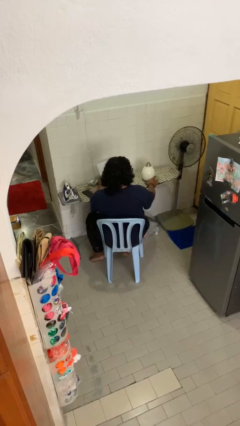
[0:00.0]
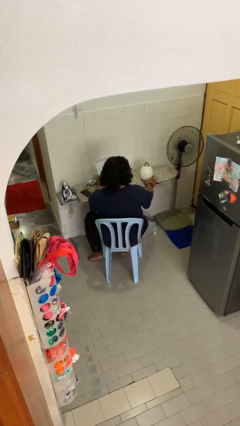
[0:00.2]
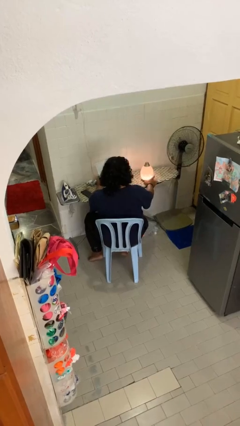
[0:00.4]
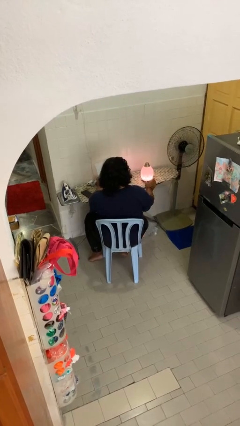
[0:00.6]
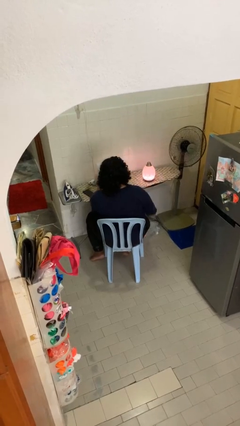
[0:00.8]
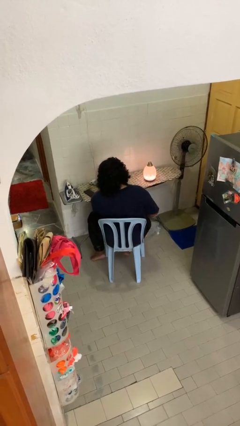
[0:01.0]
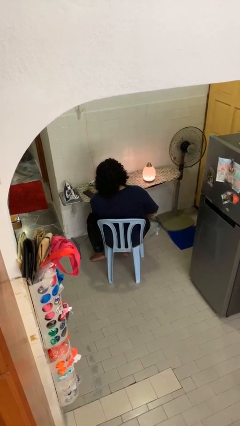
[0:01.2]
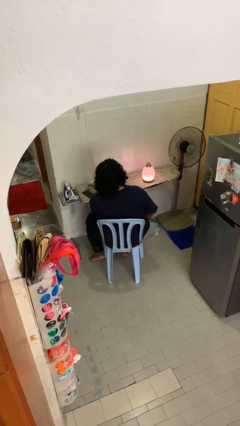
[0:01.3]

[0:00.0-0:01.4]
person turns on lamp

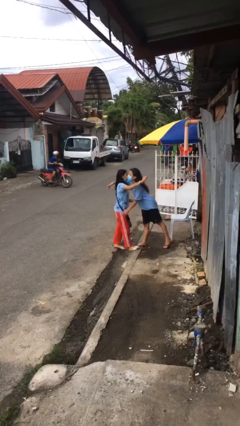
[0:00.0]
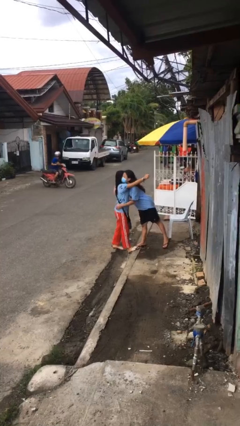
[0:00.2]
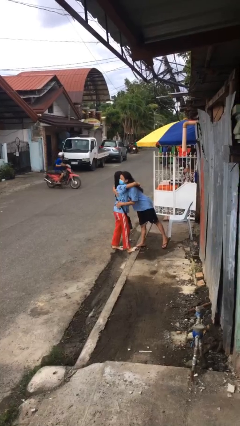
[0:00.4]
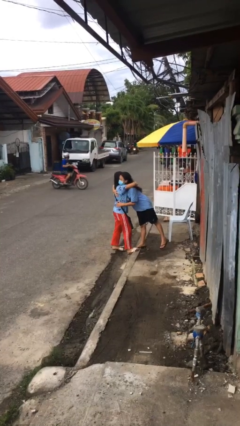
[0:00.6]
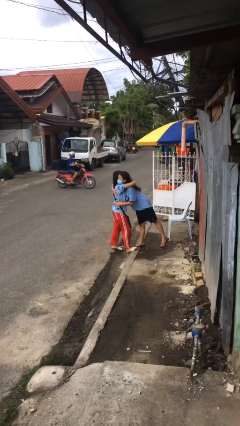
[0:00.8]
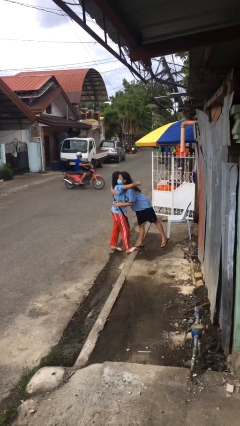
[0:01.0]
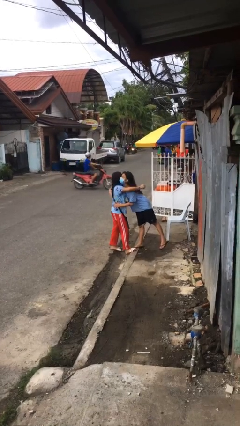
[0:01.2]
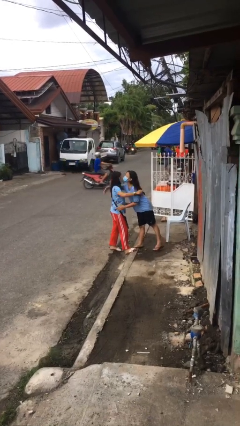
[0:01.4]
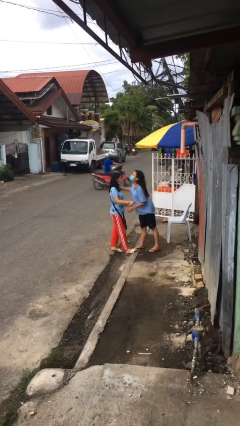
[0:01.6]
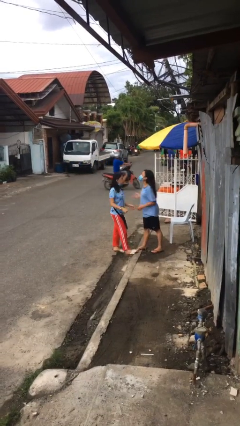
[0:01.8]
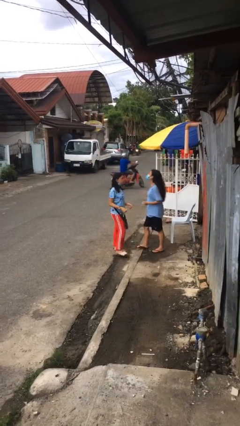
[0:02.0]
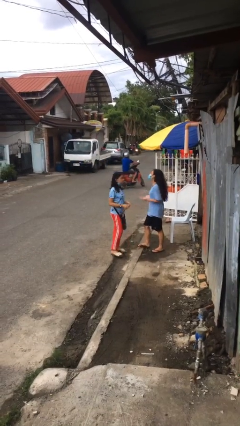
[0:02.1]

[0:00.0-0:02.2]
person embraces person

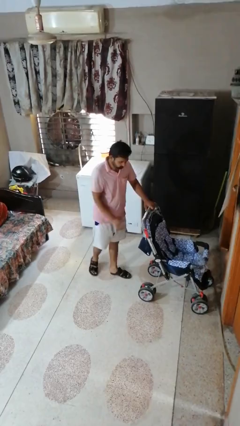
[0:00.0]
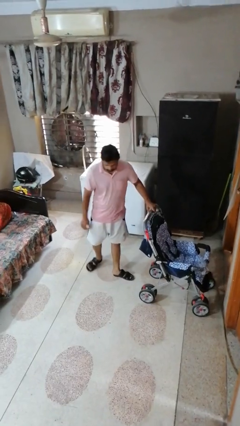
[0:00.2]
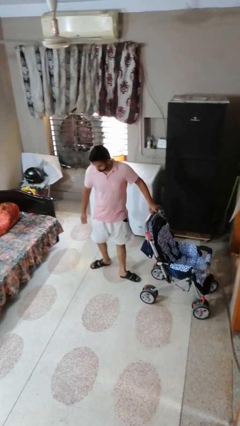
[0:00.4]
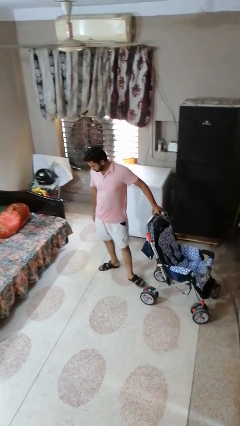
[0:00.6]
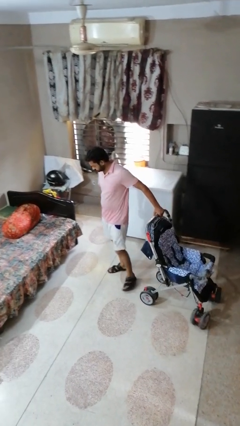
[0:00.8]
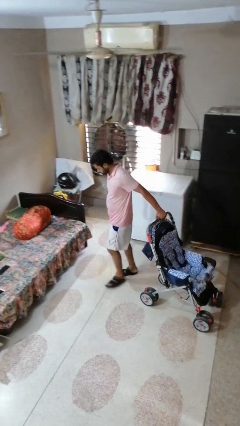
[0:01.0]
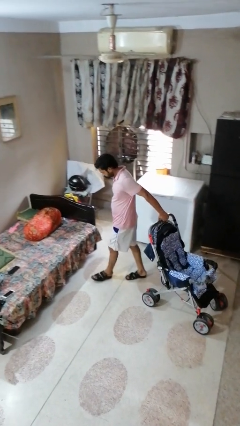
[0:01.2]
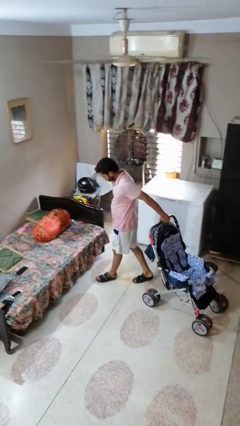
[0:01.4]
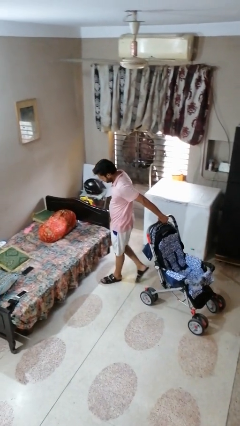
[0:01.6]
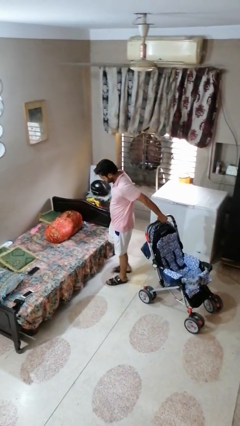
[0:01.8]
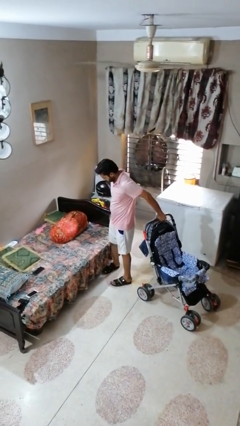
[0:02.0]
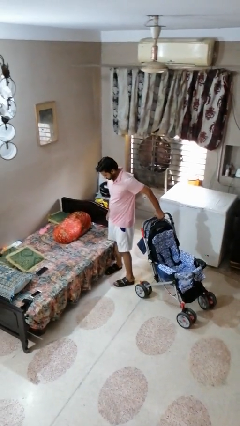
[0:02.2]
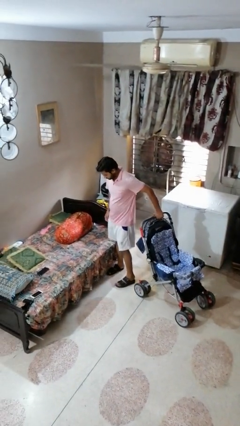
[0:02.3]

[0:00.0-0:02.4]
person pulls wheeled cart

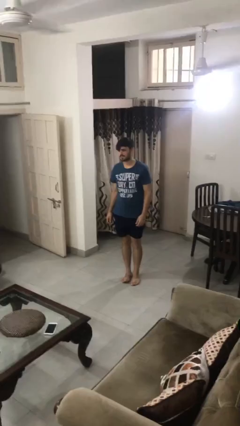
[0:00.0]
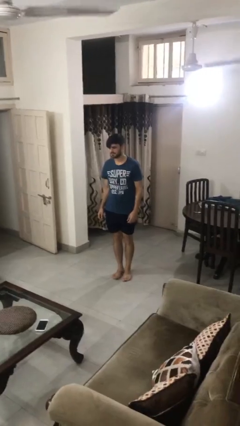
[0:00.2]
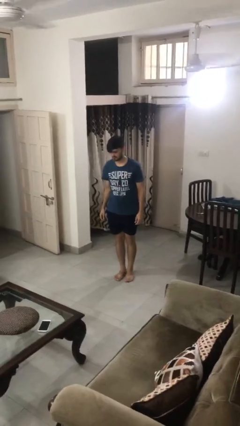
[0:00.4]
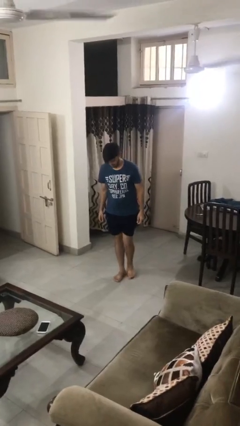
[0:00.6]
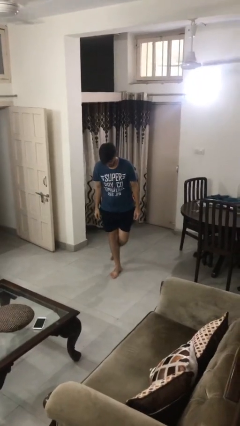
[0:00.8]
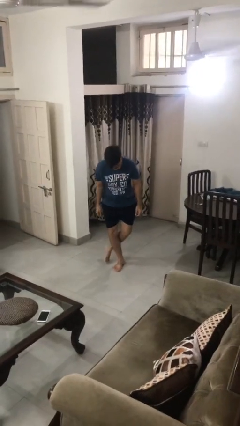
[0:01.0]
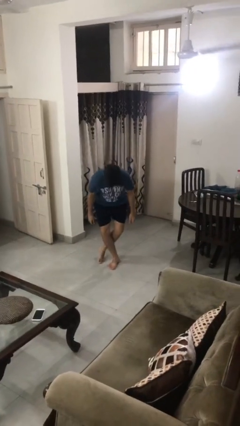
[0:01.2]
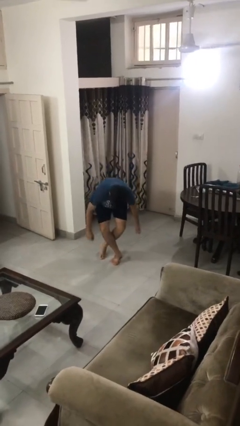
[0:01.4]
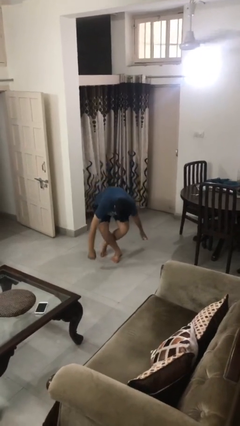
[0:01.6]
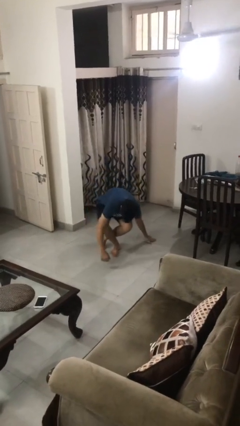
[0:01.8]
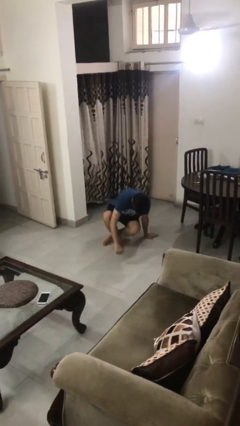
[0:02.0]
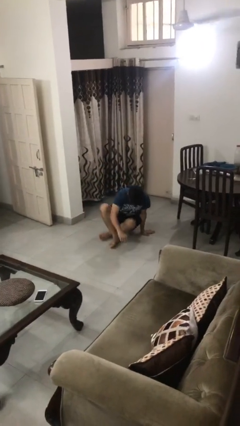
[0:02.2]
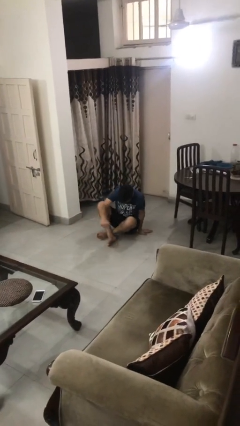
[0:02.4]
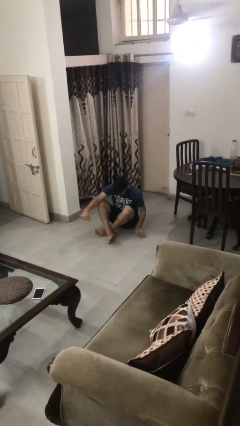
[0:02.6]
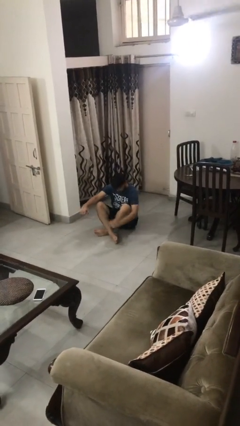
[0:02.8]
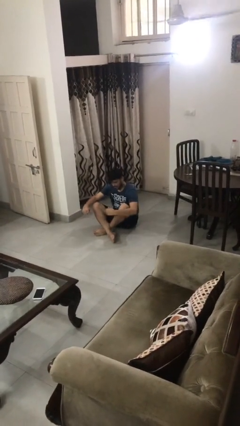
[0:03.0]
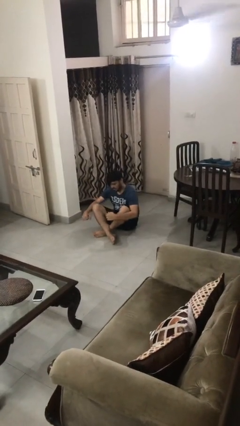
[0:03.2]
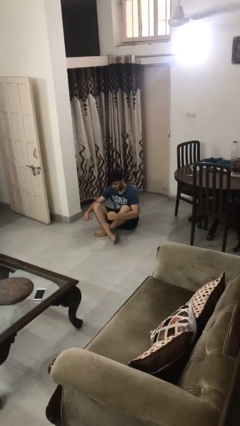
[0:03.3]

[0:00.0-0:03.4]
person sits crisscross

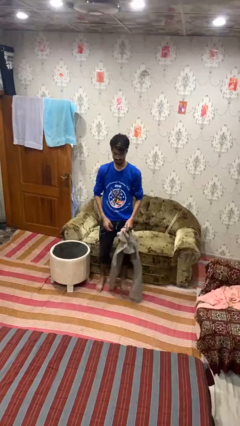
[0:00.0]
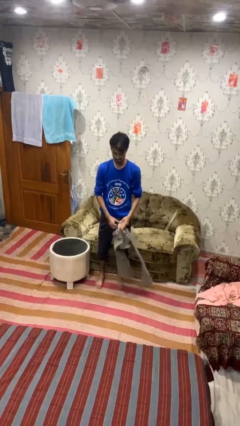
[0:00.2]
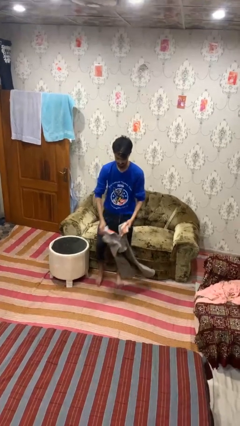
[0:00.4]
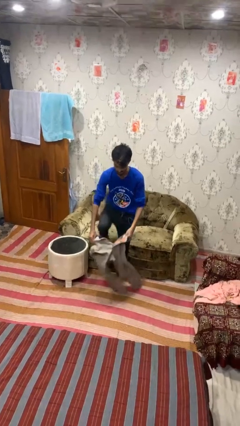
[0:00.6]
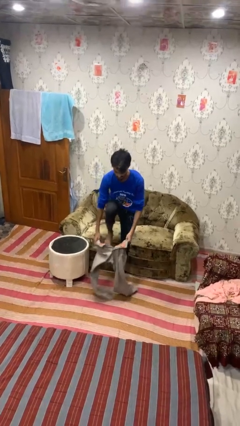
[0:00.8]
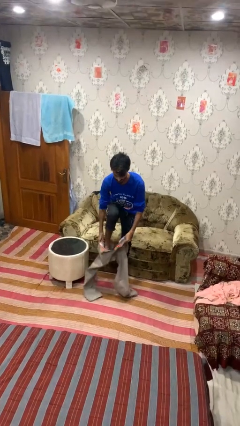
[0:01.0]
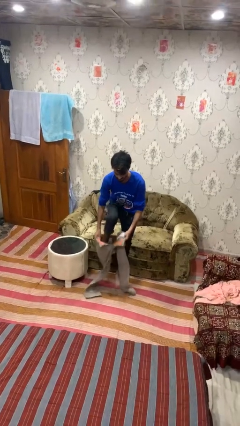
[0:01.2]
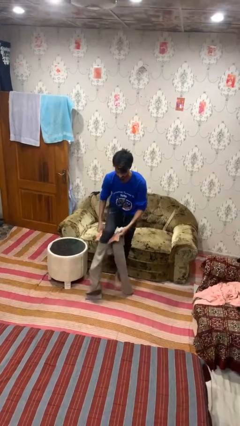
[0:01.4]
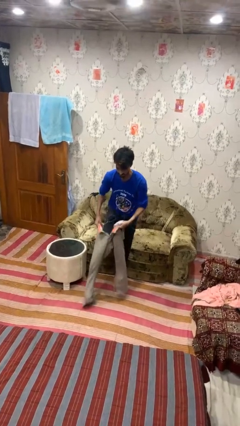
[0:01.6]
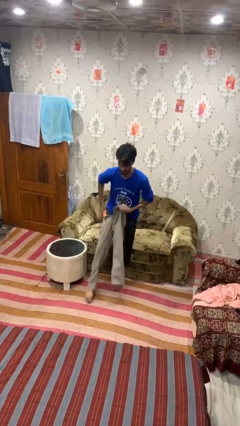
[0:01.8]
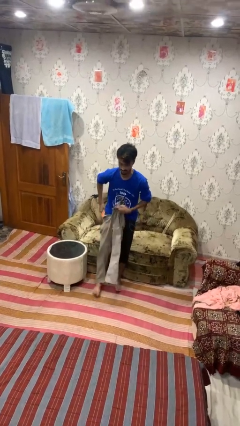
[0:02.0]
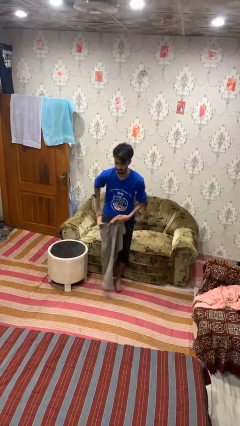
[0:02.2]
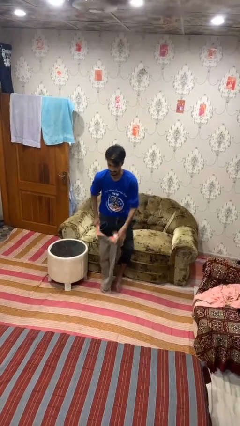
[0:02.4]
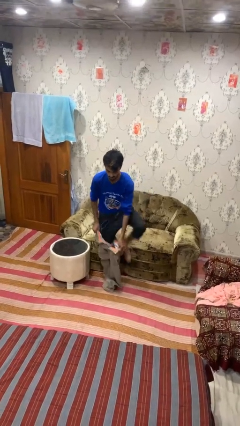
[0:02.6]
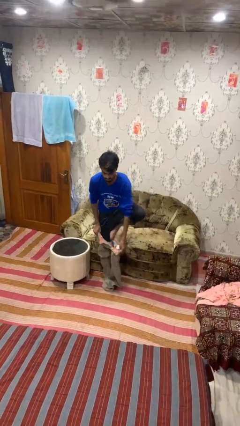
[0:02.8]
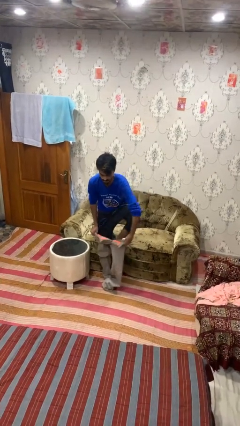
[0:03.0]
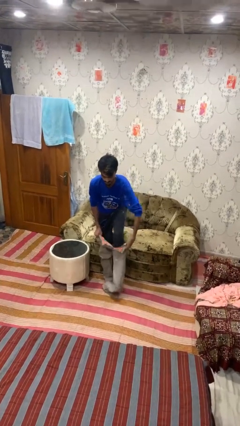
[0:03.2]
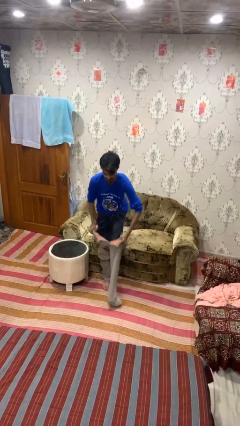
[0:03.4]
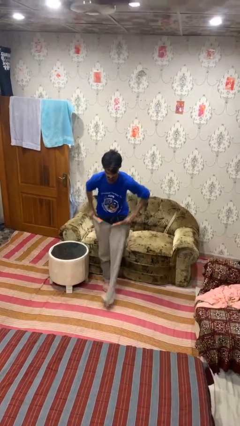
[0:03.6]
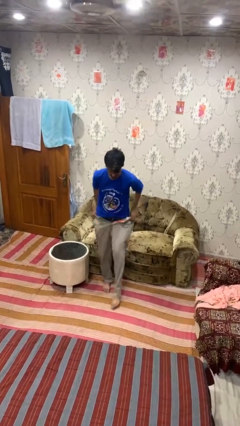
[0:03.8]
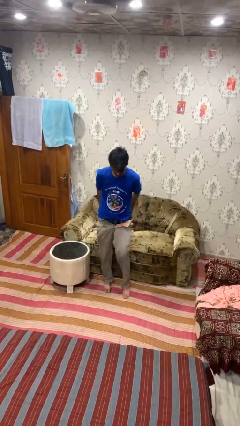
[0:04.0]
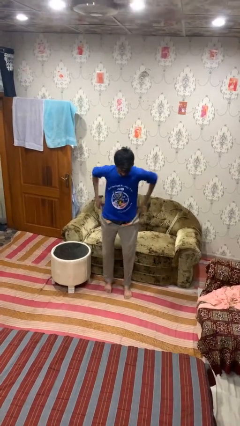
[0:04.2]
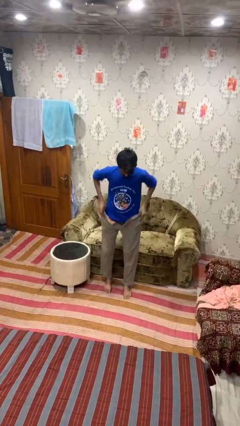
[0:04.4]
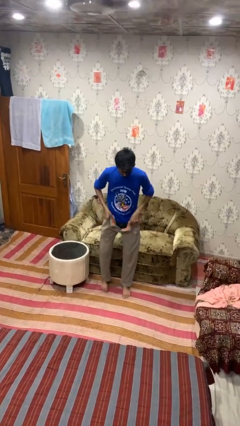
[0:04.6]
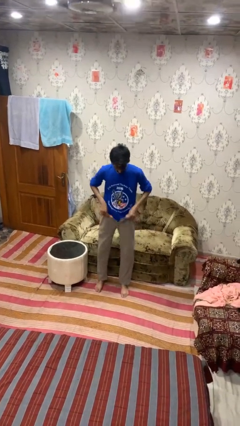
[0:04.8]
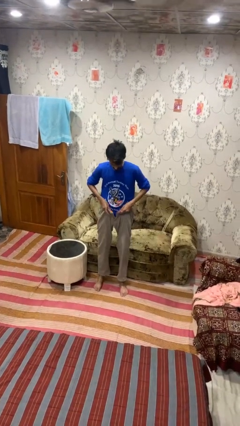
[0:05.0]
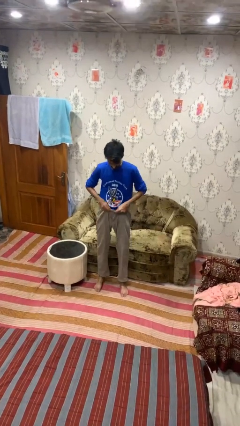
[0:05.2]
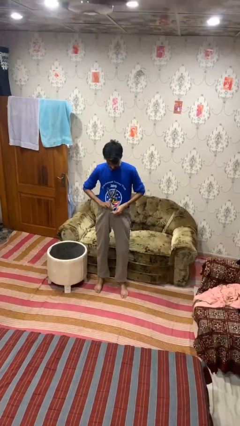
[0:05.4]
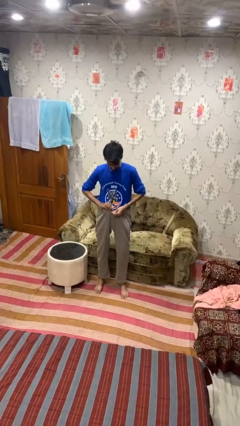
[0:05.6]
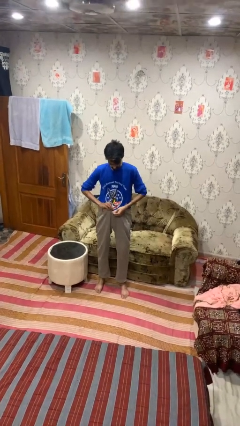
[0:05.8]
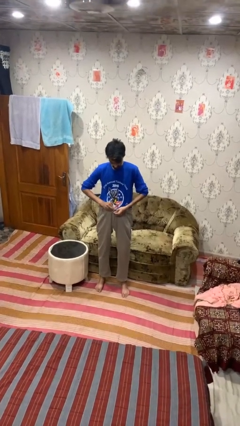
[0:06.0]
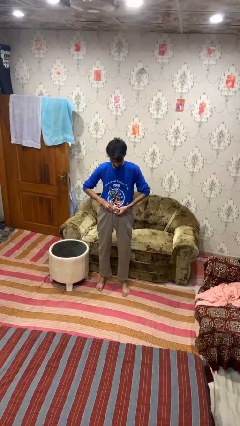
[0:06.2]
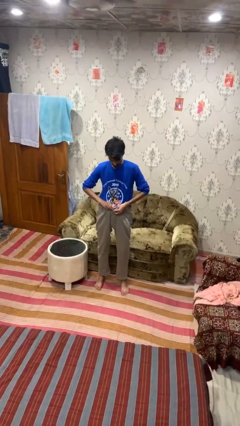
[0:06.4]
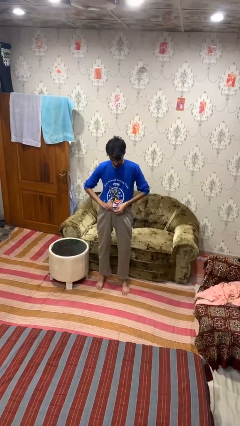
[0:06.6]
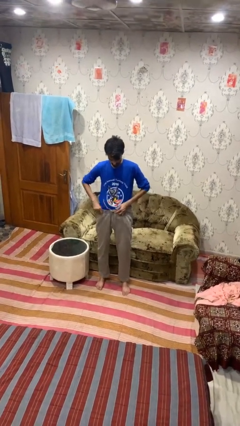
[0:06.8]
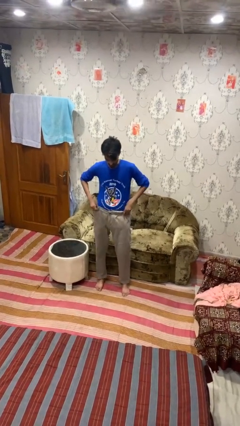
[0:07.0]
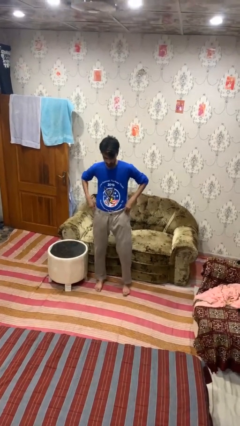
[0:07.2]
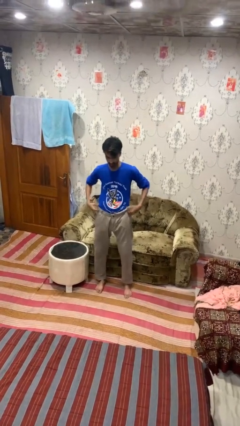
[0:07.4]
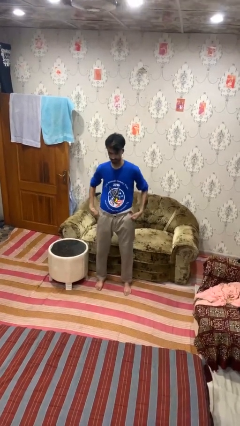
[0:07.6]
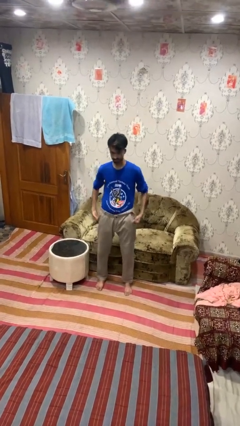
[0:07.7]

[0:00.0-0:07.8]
person puts on pants

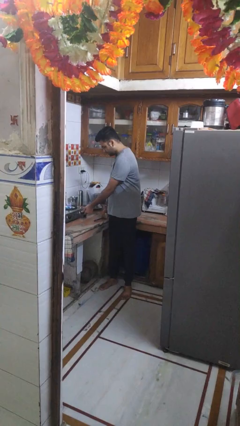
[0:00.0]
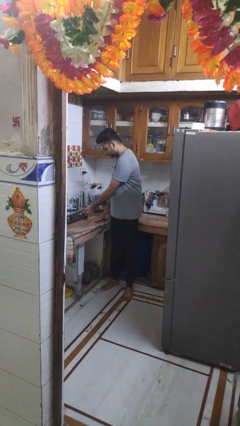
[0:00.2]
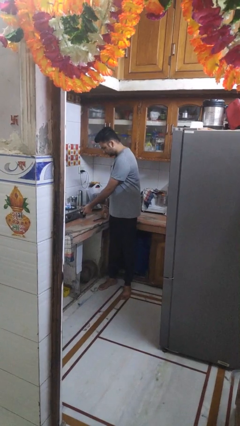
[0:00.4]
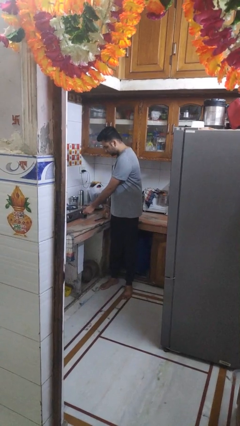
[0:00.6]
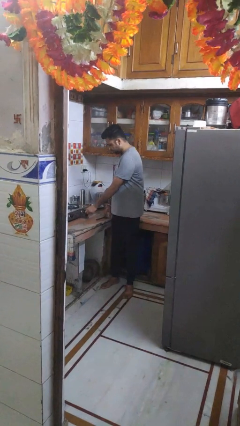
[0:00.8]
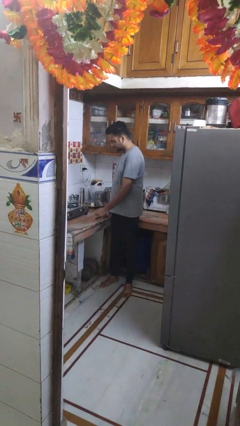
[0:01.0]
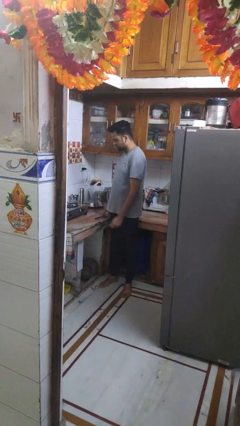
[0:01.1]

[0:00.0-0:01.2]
person turns off stovetop
